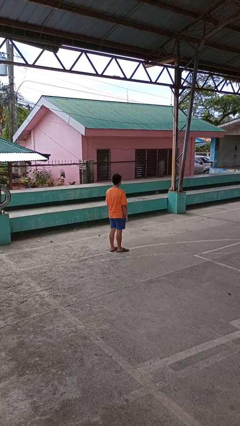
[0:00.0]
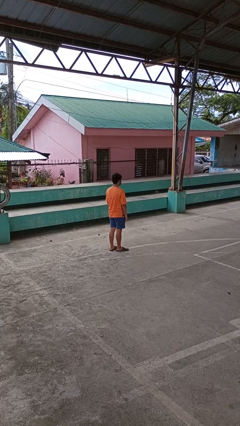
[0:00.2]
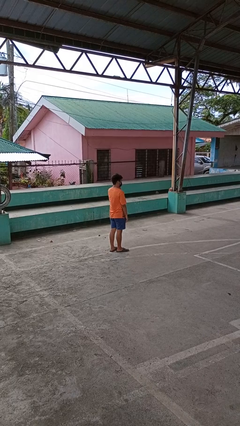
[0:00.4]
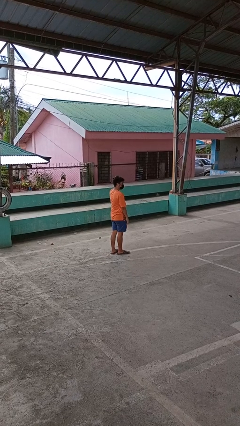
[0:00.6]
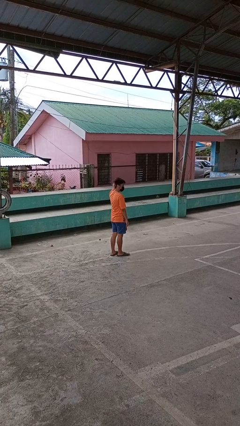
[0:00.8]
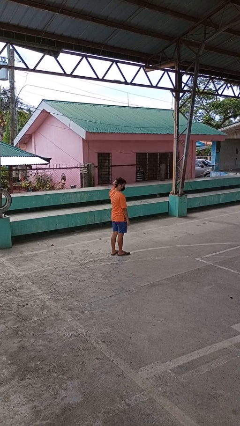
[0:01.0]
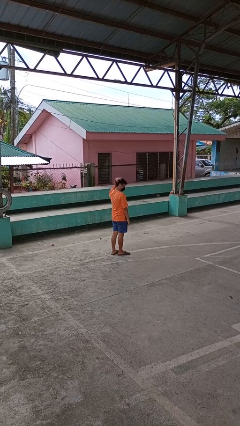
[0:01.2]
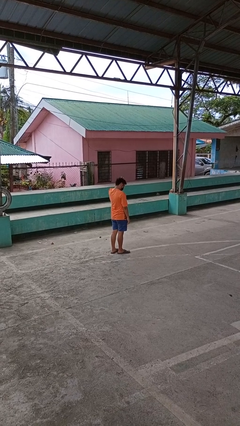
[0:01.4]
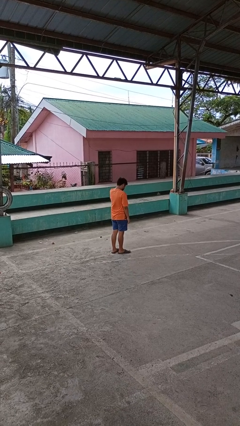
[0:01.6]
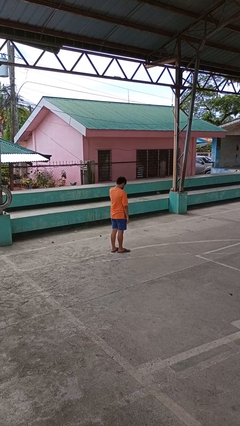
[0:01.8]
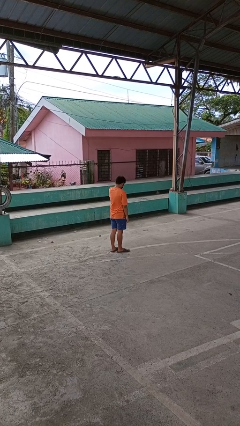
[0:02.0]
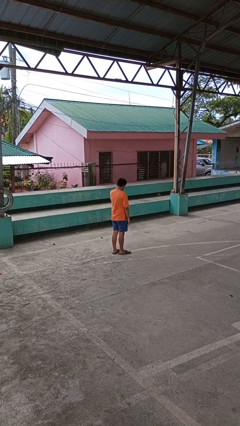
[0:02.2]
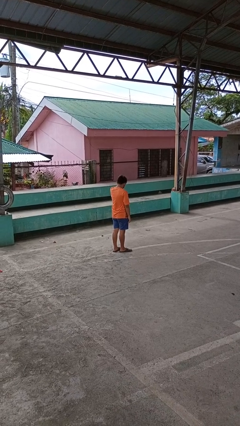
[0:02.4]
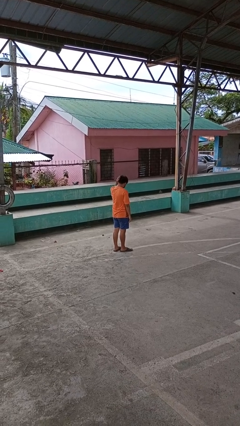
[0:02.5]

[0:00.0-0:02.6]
person scratches face

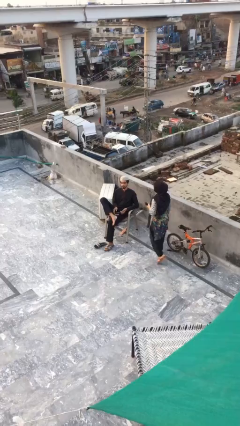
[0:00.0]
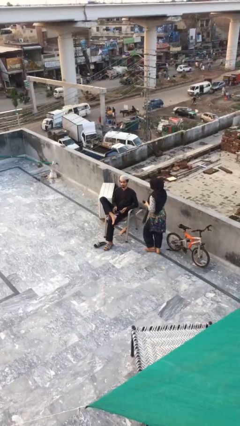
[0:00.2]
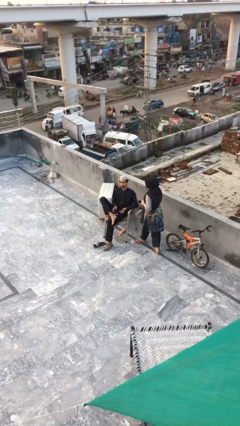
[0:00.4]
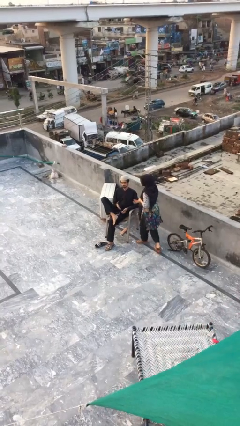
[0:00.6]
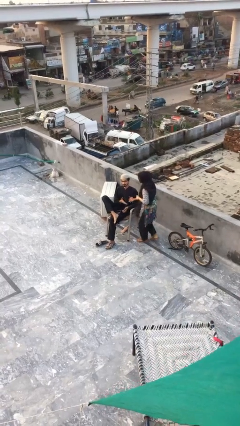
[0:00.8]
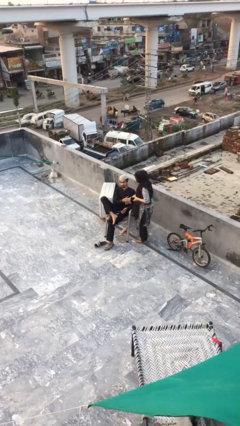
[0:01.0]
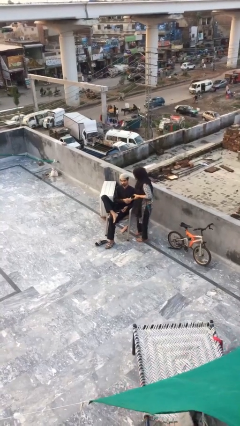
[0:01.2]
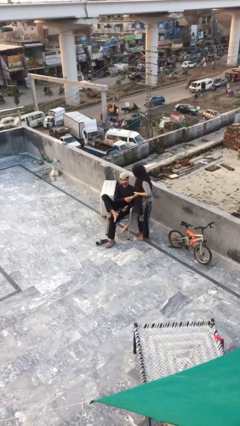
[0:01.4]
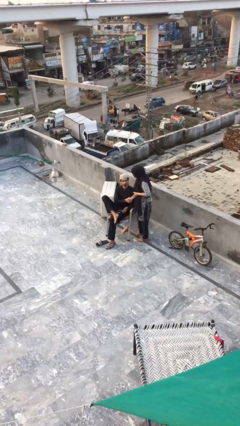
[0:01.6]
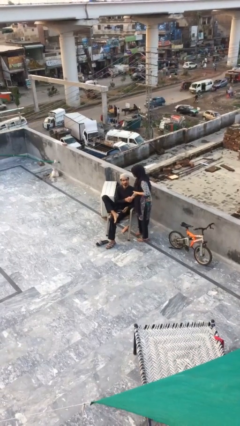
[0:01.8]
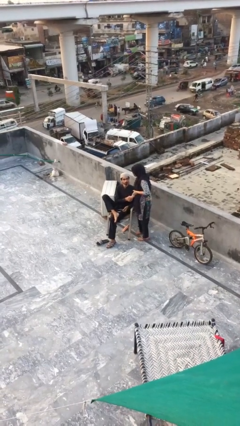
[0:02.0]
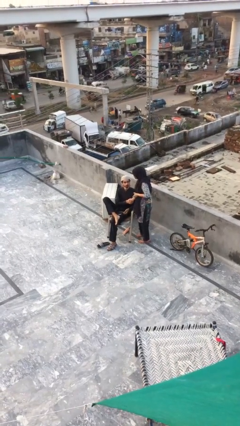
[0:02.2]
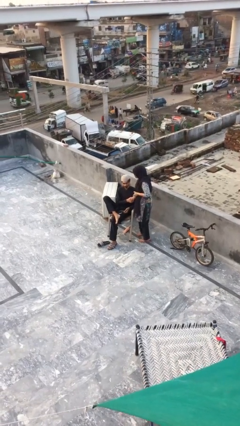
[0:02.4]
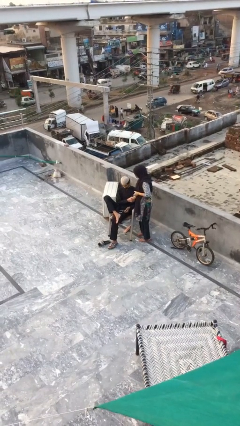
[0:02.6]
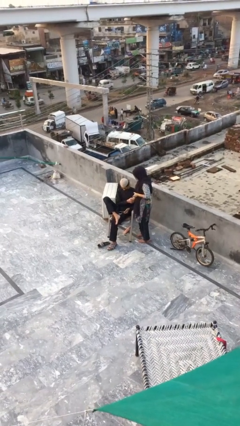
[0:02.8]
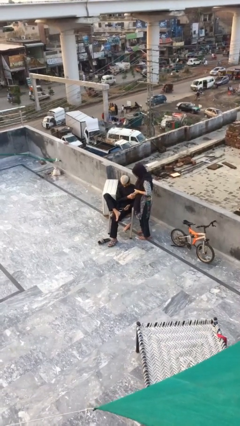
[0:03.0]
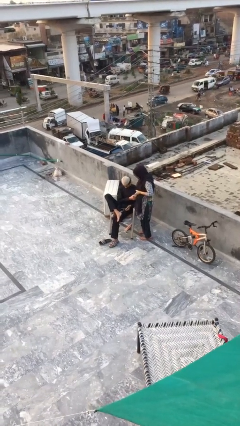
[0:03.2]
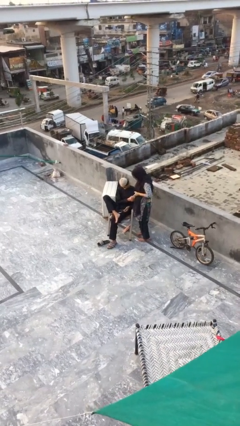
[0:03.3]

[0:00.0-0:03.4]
person shakes hand

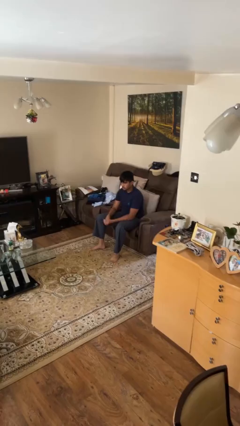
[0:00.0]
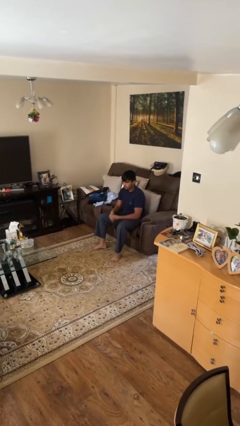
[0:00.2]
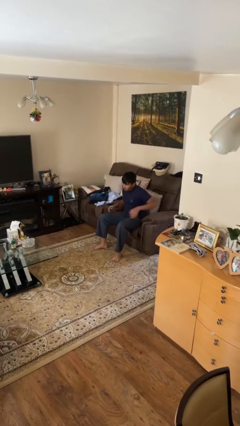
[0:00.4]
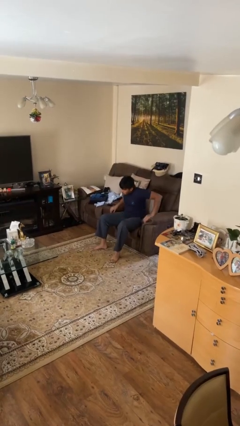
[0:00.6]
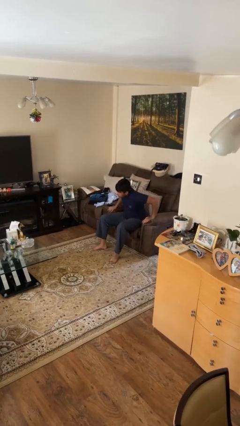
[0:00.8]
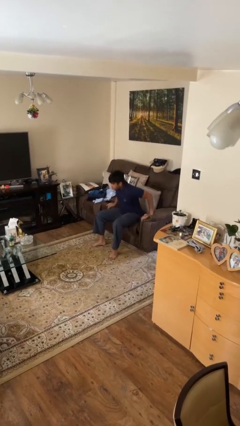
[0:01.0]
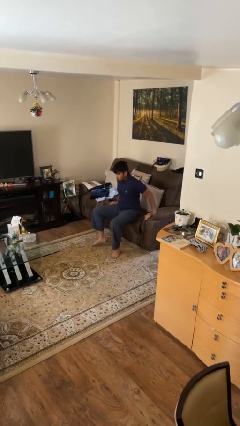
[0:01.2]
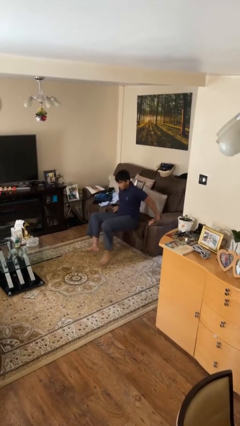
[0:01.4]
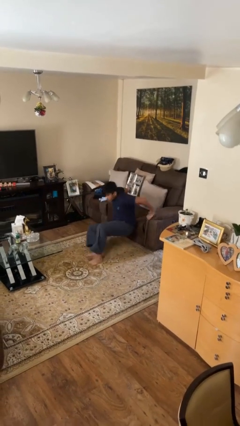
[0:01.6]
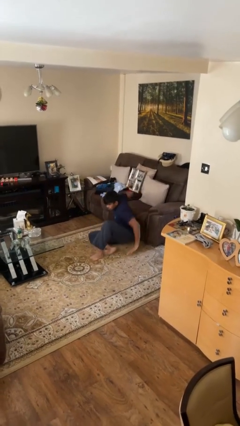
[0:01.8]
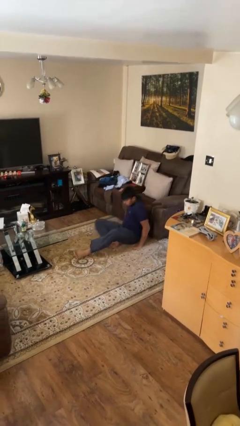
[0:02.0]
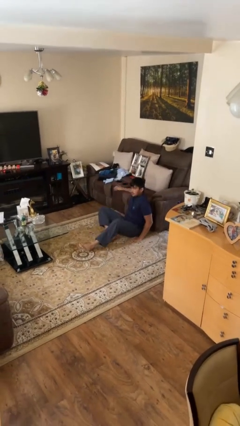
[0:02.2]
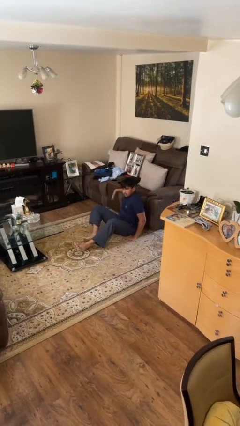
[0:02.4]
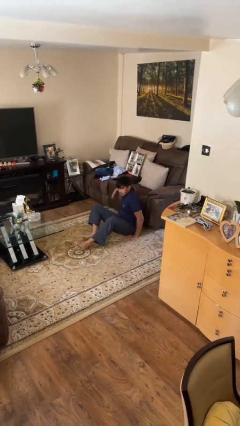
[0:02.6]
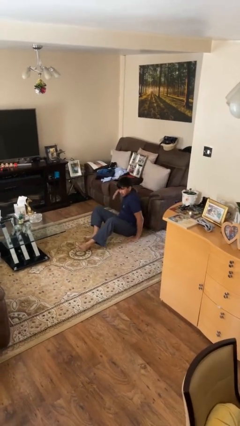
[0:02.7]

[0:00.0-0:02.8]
person falls from chair

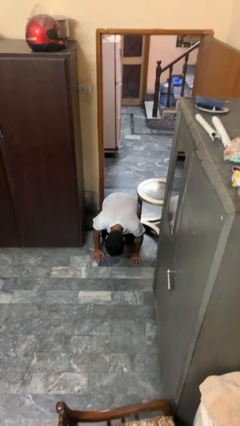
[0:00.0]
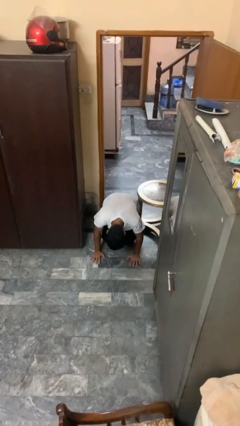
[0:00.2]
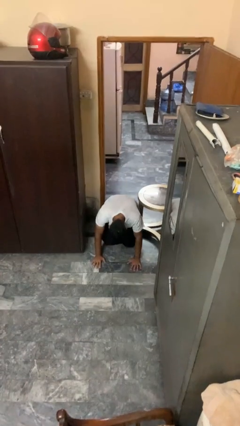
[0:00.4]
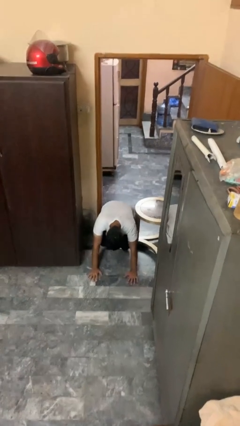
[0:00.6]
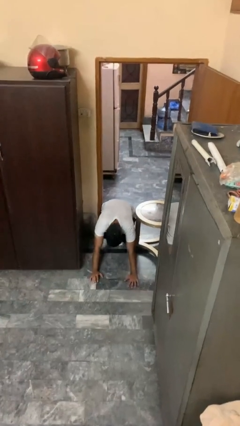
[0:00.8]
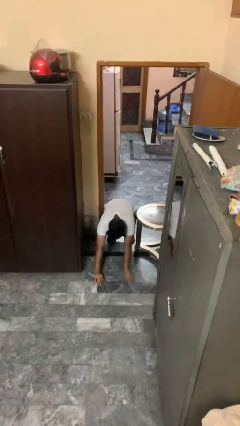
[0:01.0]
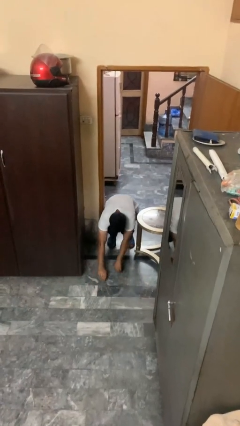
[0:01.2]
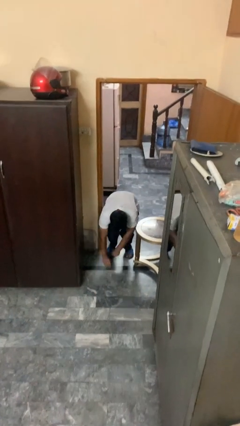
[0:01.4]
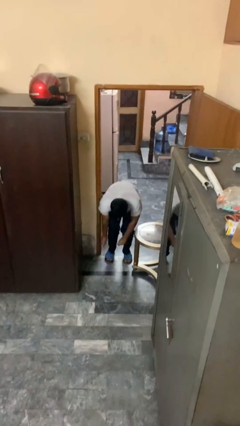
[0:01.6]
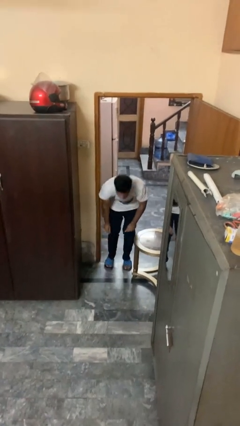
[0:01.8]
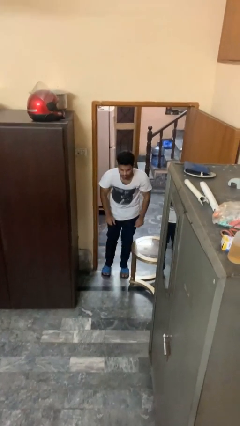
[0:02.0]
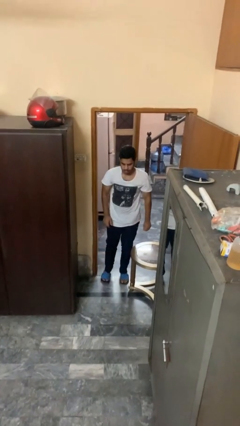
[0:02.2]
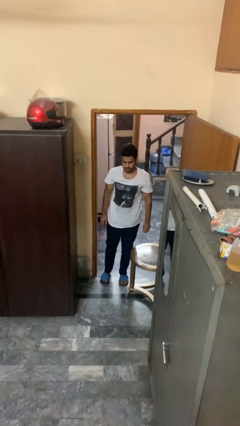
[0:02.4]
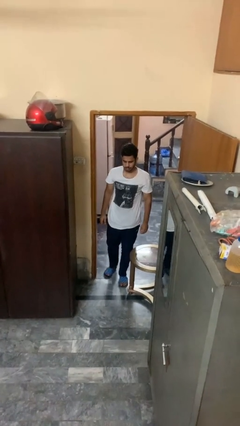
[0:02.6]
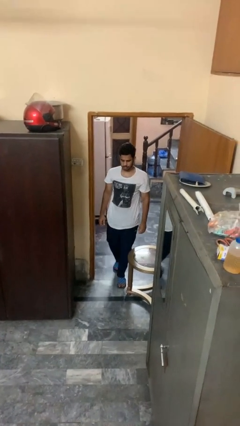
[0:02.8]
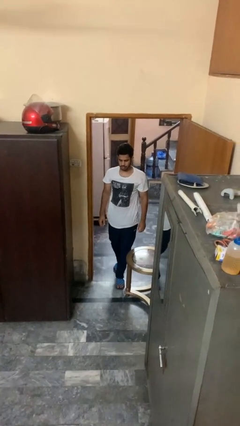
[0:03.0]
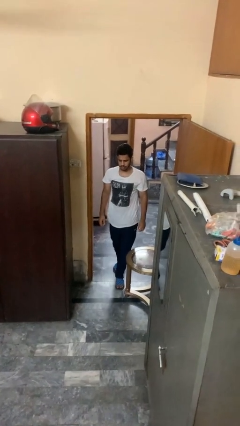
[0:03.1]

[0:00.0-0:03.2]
person stands up from floor

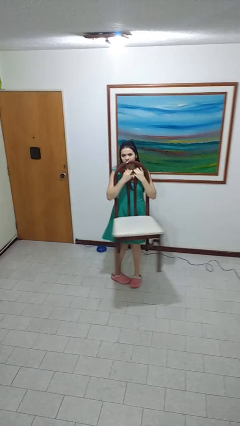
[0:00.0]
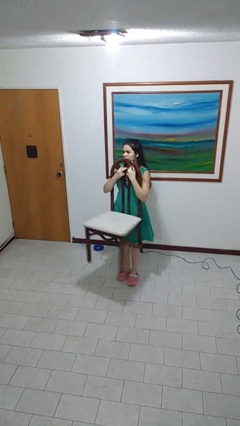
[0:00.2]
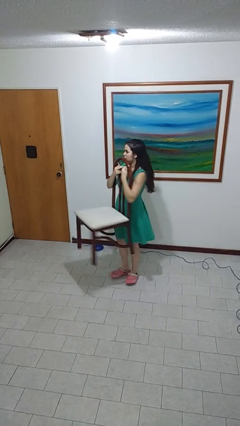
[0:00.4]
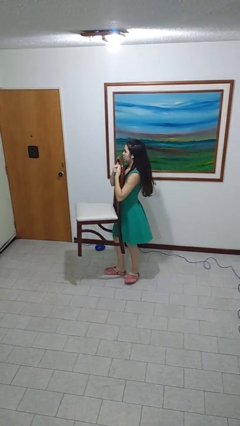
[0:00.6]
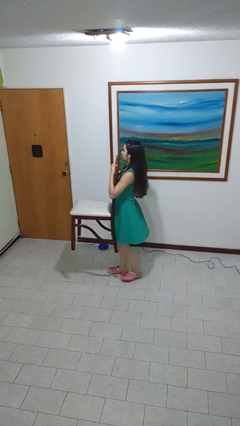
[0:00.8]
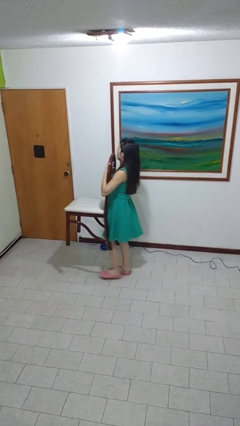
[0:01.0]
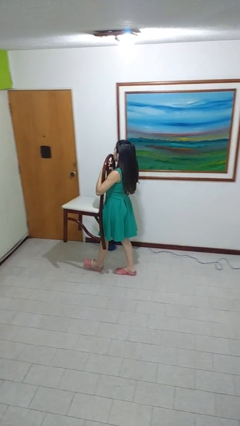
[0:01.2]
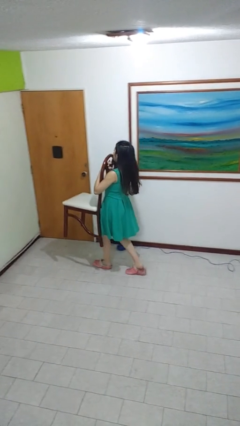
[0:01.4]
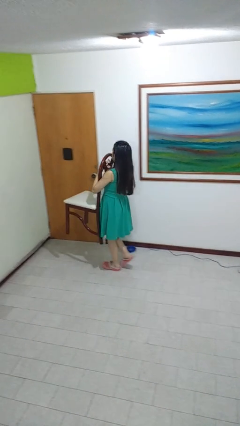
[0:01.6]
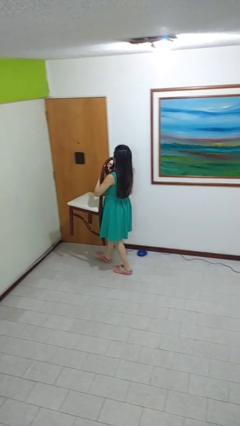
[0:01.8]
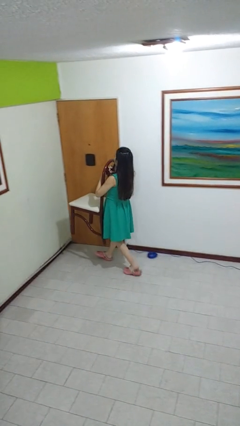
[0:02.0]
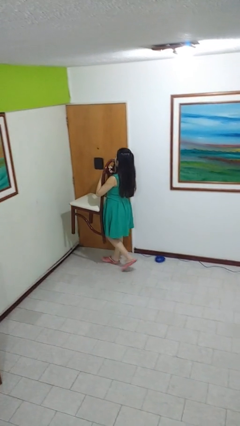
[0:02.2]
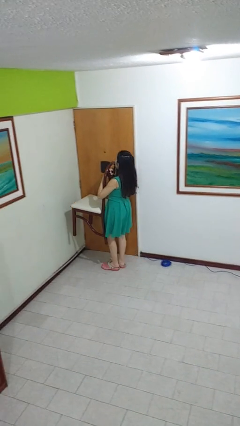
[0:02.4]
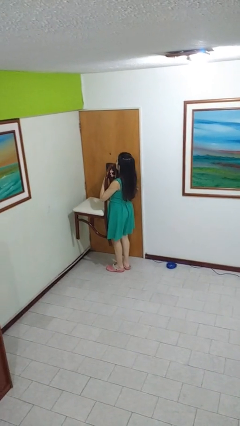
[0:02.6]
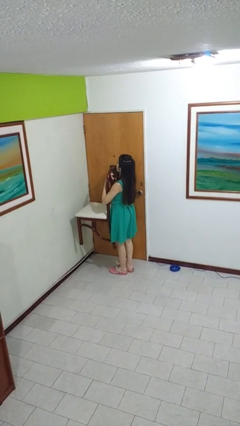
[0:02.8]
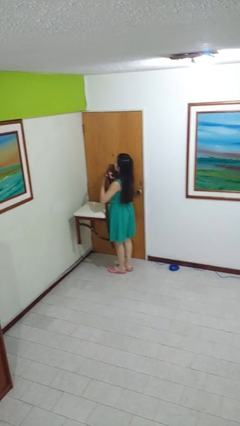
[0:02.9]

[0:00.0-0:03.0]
person carries furniture

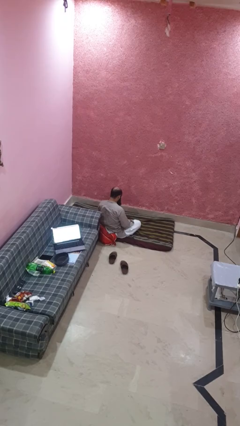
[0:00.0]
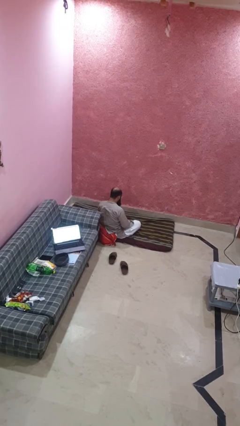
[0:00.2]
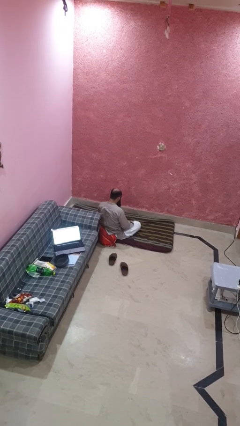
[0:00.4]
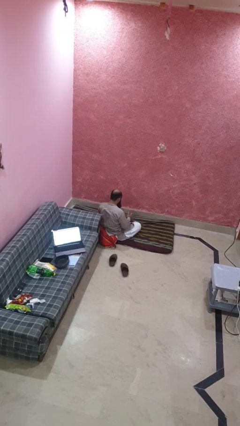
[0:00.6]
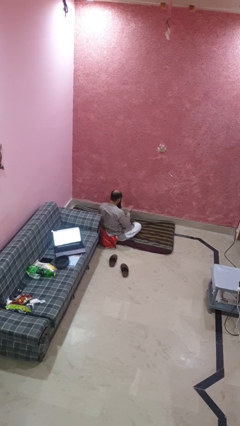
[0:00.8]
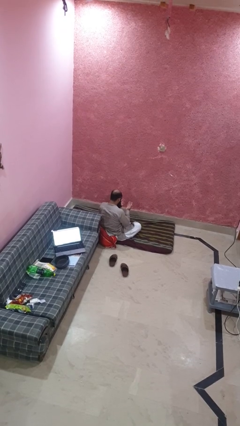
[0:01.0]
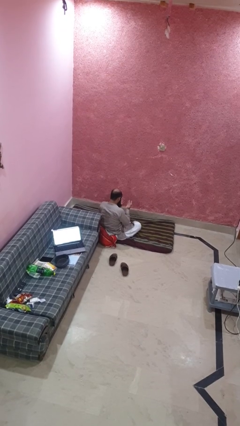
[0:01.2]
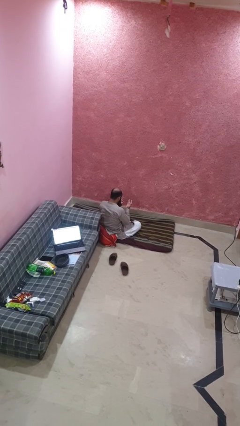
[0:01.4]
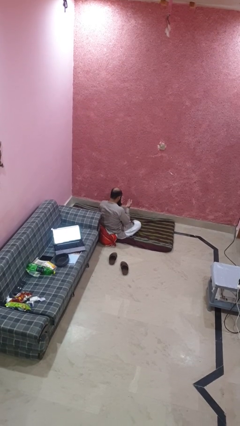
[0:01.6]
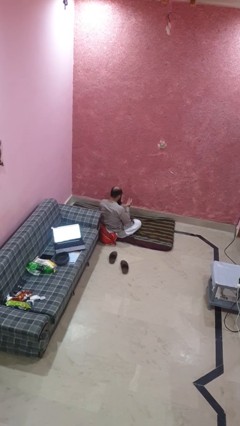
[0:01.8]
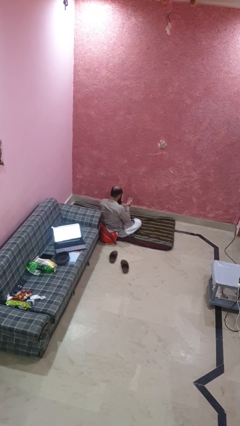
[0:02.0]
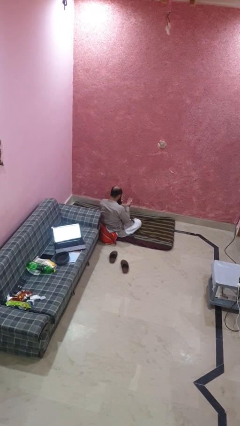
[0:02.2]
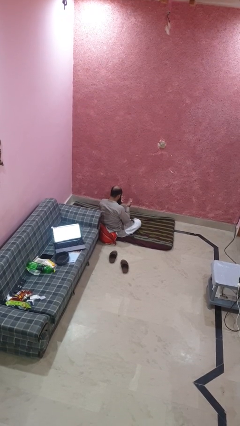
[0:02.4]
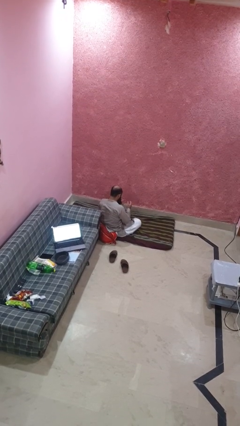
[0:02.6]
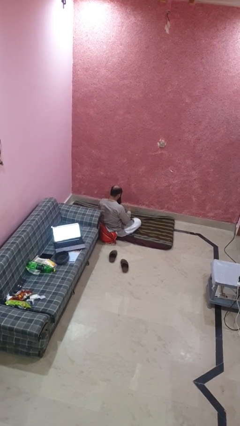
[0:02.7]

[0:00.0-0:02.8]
person looks at hands in lap
